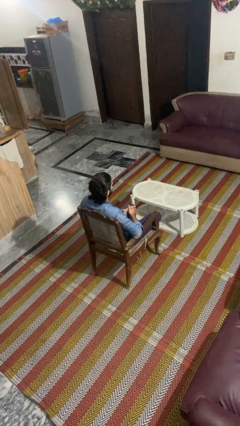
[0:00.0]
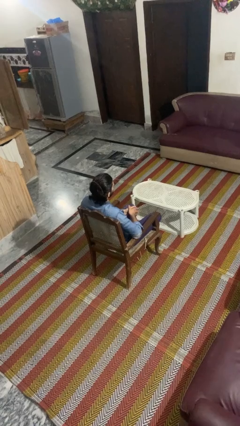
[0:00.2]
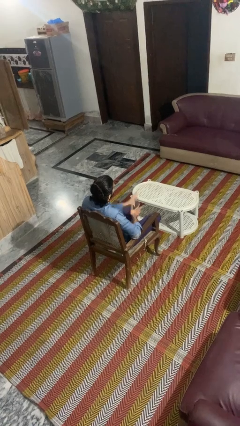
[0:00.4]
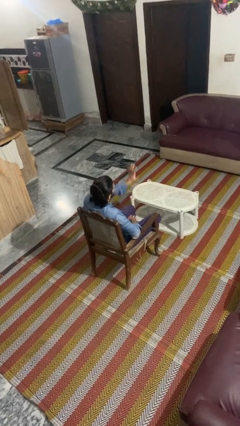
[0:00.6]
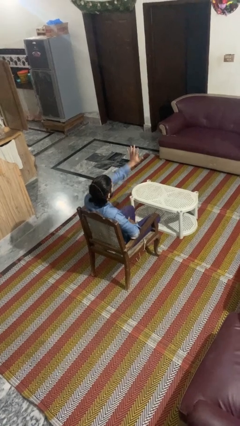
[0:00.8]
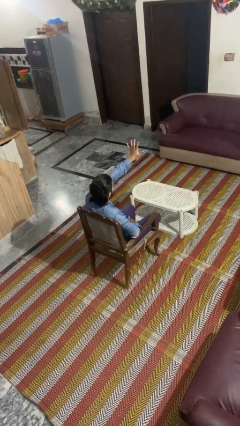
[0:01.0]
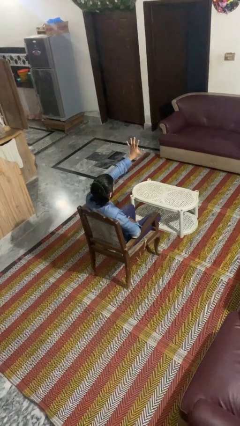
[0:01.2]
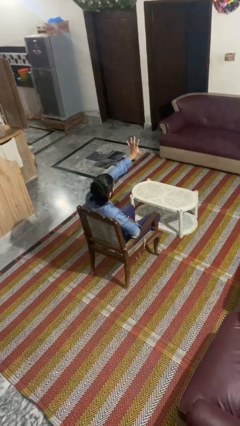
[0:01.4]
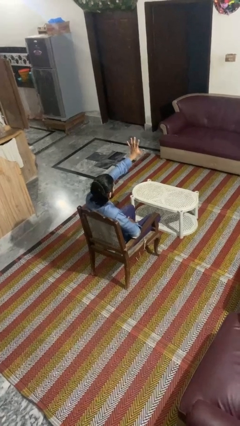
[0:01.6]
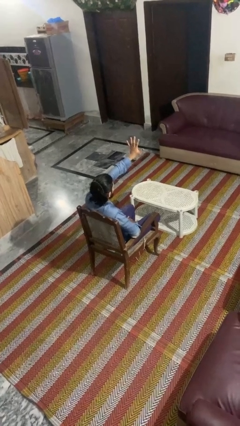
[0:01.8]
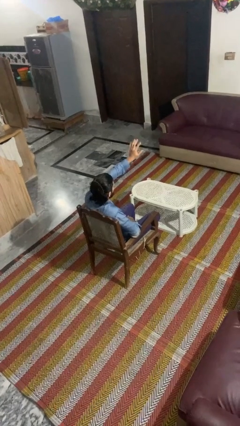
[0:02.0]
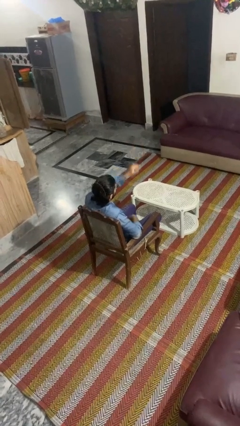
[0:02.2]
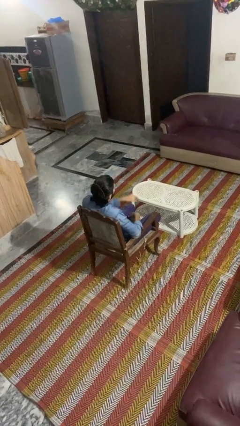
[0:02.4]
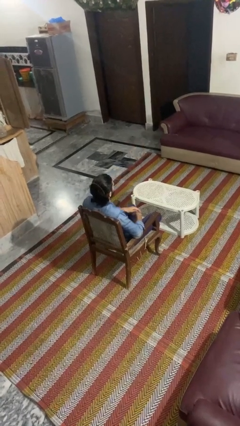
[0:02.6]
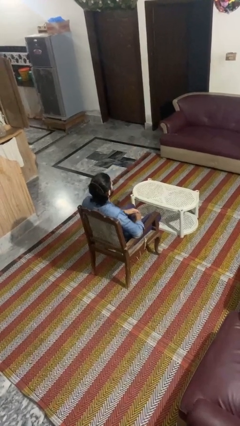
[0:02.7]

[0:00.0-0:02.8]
person gestures number five

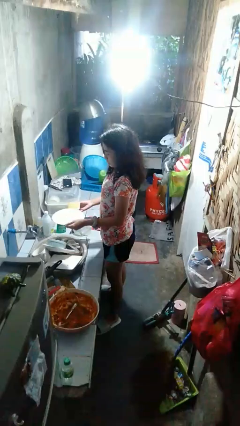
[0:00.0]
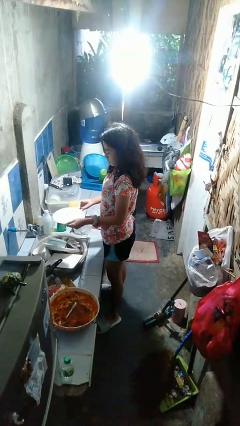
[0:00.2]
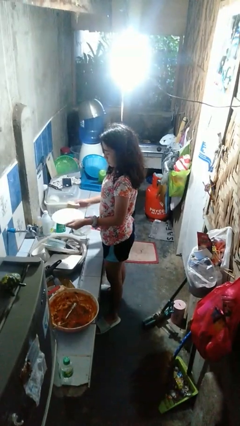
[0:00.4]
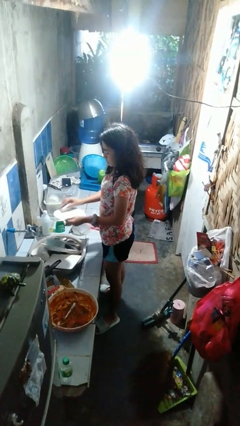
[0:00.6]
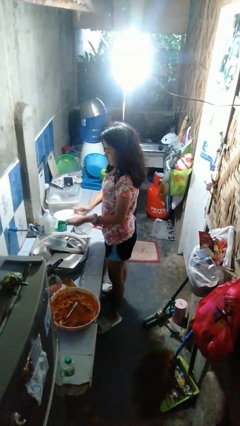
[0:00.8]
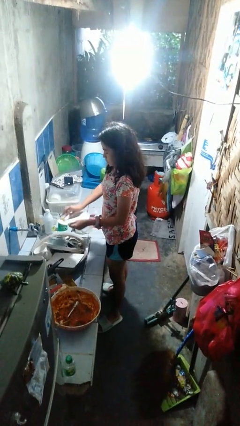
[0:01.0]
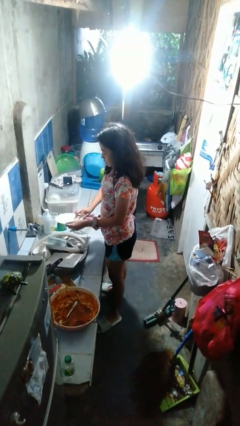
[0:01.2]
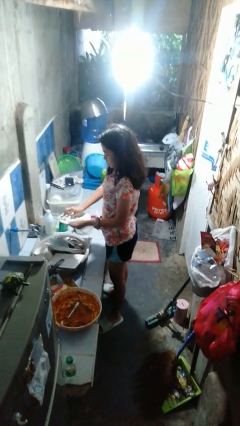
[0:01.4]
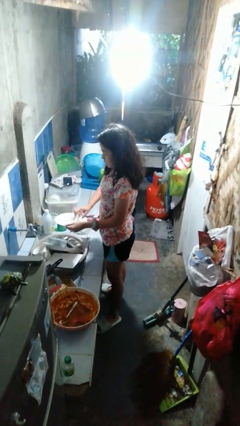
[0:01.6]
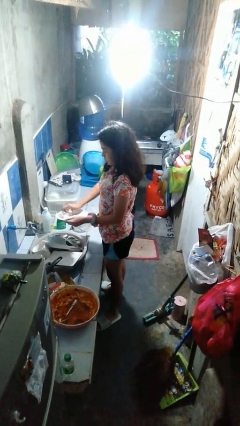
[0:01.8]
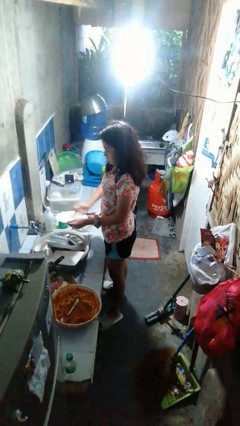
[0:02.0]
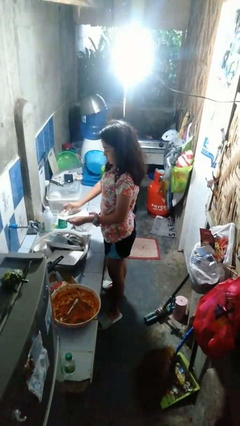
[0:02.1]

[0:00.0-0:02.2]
person washes dish

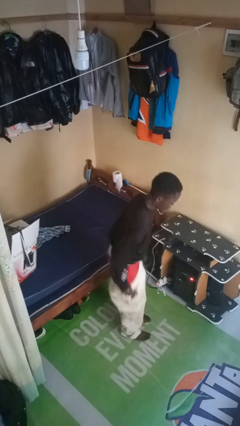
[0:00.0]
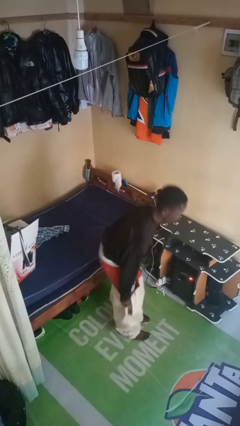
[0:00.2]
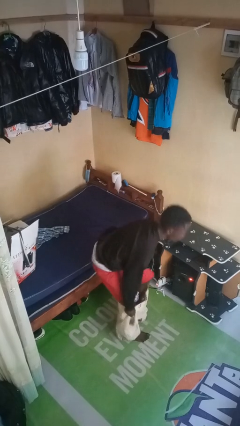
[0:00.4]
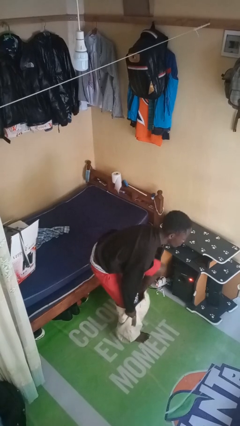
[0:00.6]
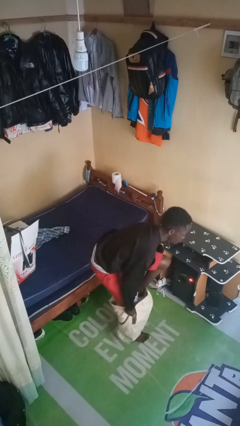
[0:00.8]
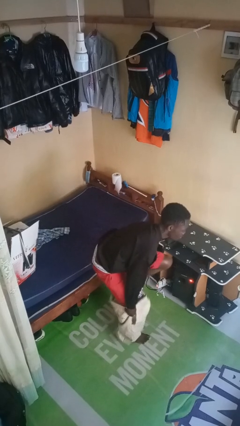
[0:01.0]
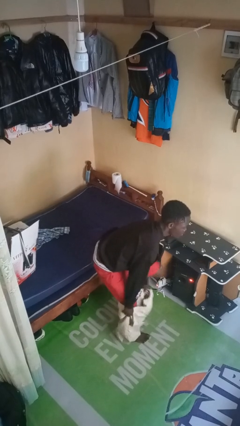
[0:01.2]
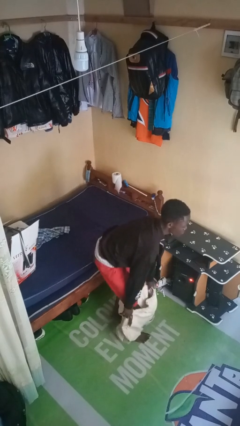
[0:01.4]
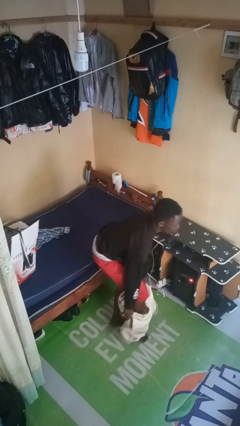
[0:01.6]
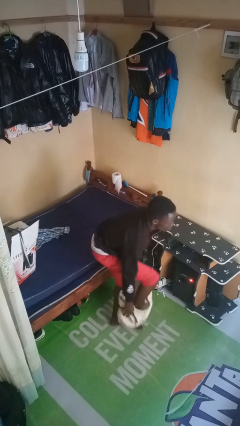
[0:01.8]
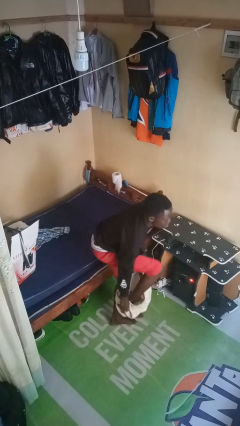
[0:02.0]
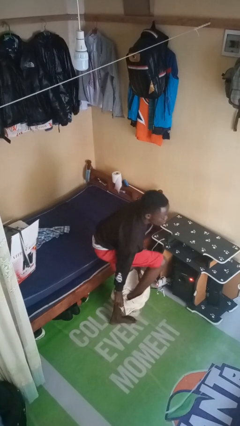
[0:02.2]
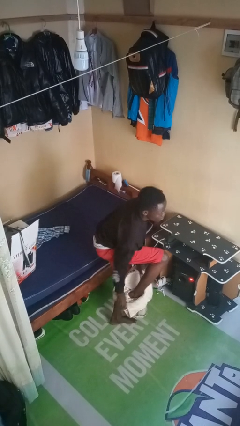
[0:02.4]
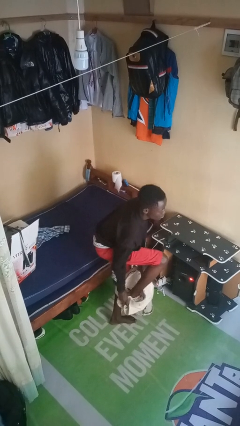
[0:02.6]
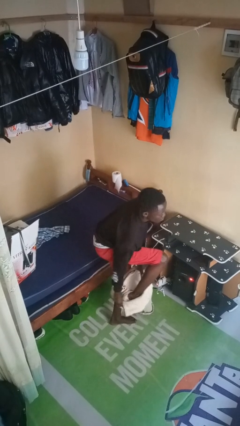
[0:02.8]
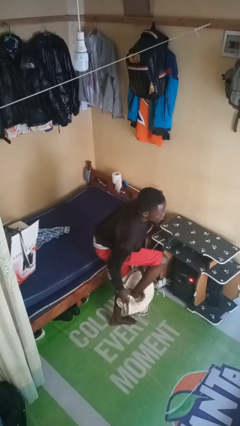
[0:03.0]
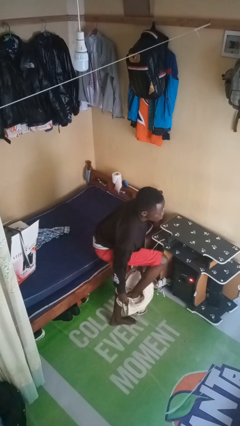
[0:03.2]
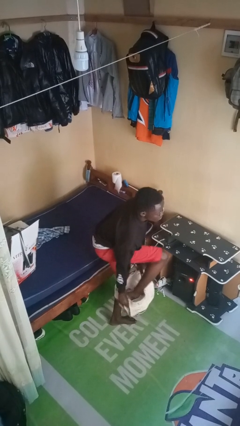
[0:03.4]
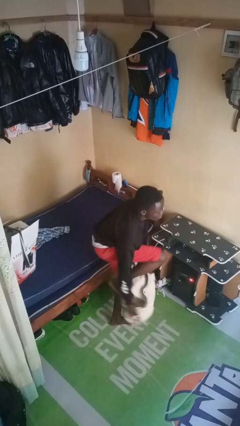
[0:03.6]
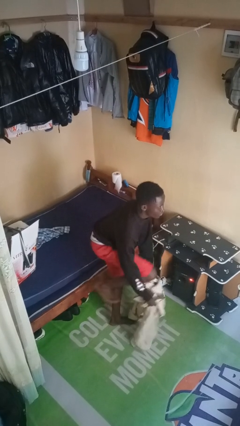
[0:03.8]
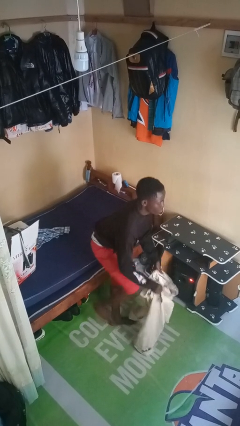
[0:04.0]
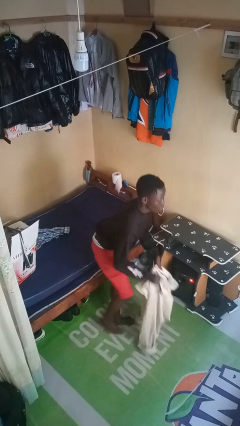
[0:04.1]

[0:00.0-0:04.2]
person takes off pants

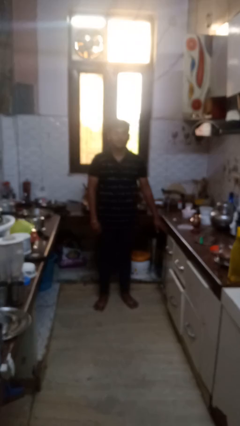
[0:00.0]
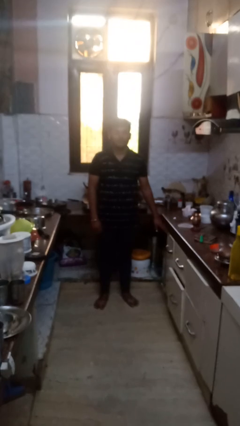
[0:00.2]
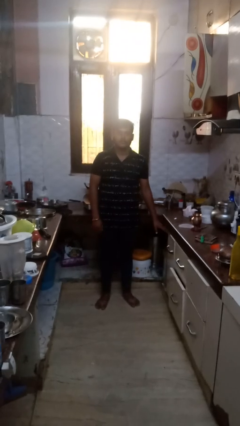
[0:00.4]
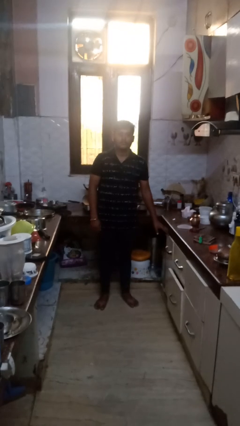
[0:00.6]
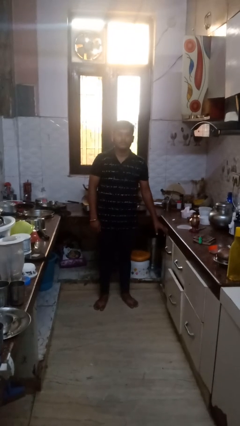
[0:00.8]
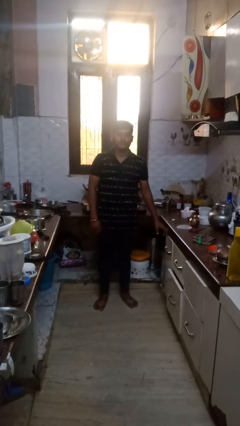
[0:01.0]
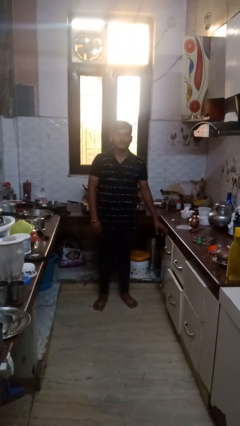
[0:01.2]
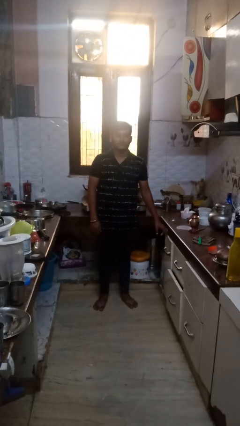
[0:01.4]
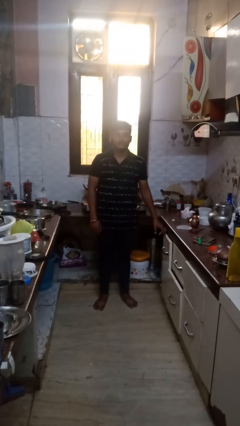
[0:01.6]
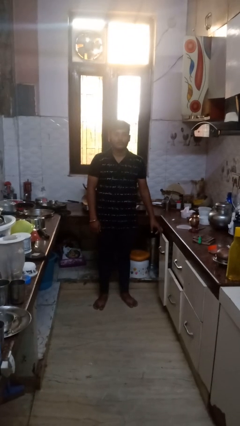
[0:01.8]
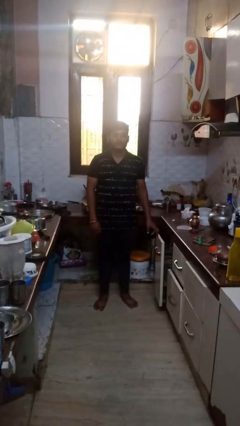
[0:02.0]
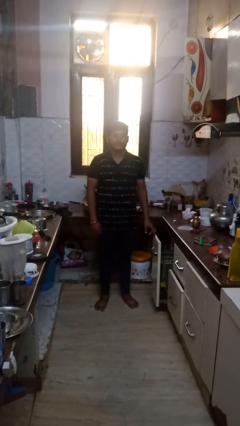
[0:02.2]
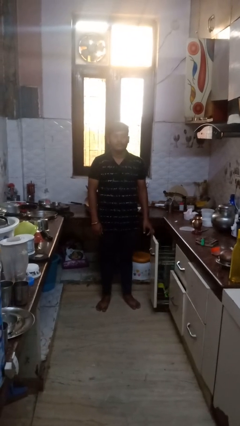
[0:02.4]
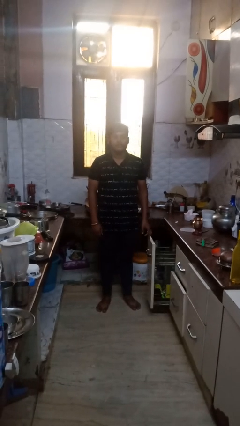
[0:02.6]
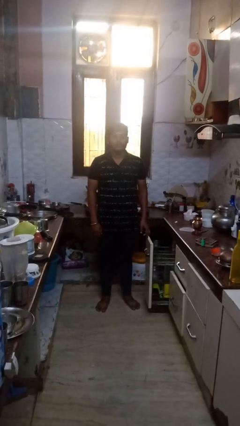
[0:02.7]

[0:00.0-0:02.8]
person opens dishwasher

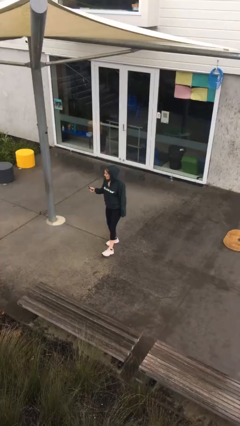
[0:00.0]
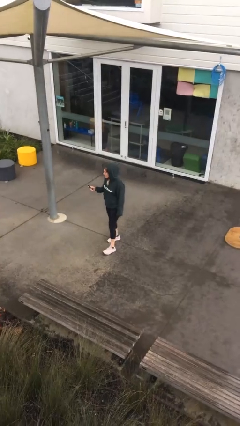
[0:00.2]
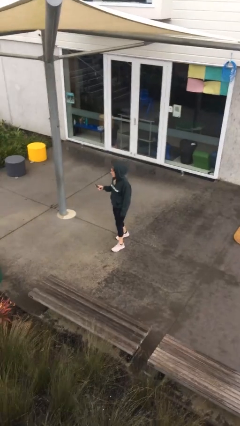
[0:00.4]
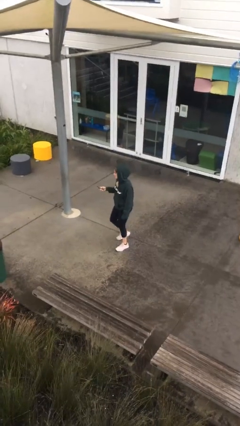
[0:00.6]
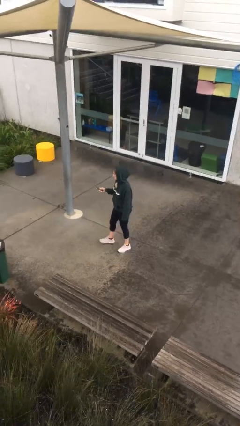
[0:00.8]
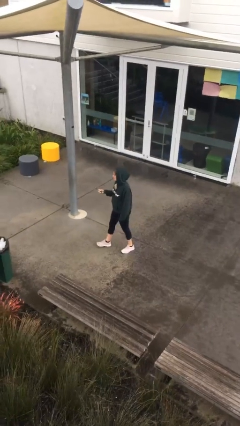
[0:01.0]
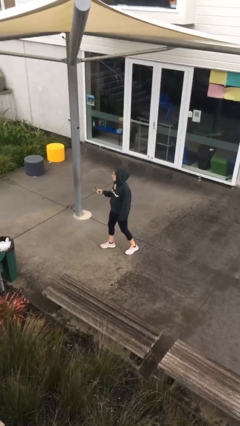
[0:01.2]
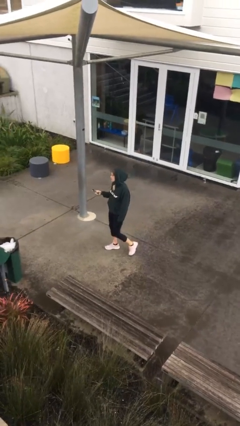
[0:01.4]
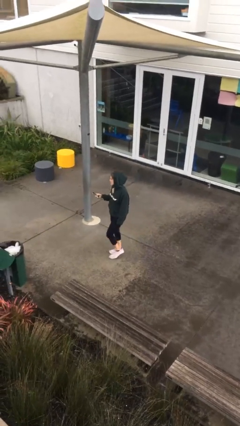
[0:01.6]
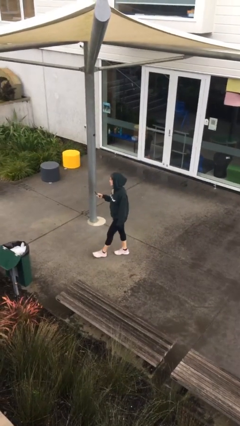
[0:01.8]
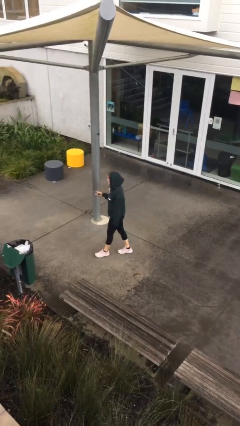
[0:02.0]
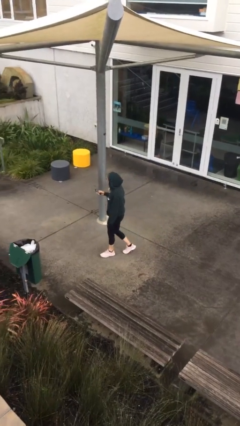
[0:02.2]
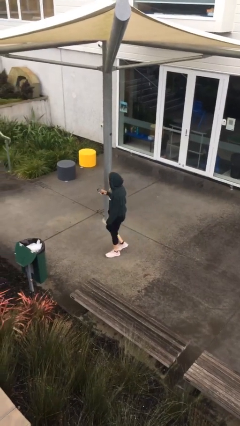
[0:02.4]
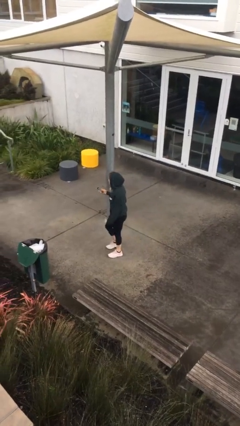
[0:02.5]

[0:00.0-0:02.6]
person texts on phone

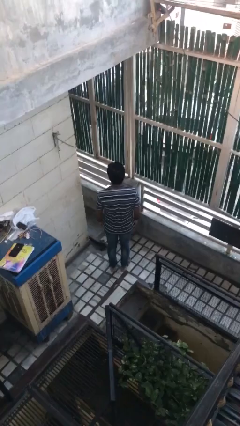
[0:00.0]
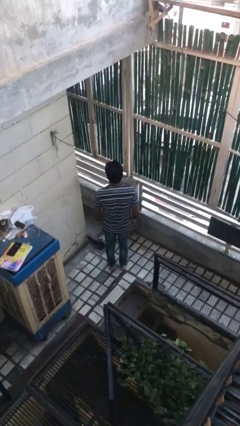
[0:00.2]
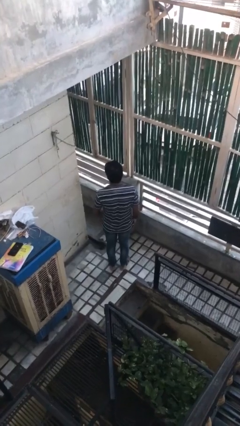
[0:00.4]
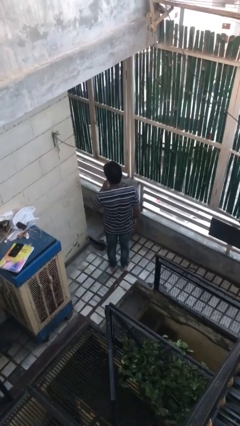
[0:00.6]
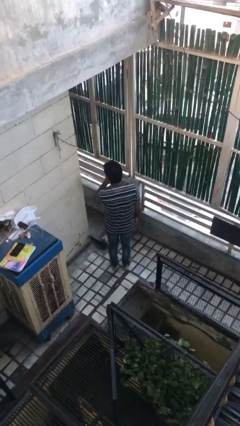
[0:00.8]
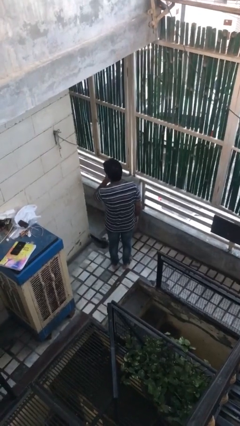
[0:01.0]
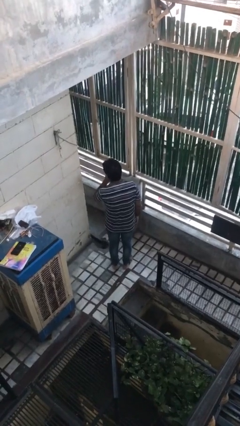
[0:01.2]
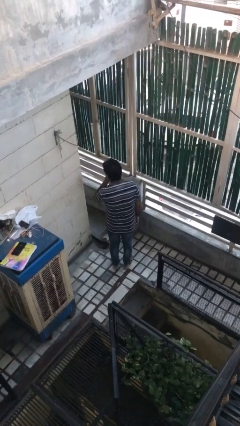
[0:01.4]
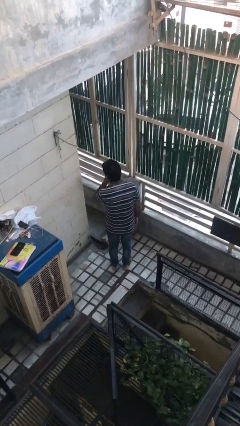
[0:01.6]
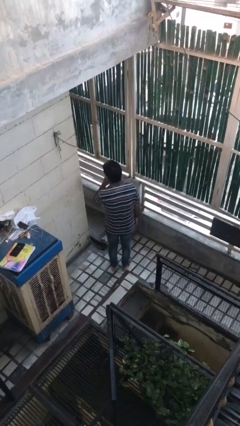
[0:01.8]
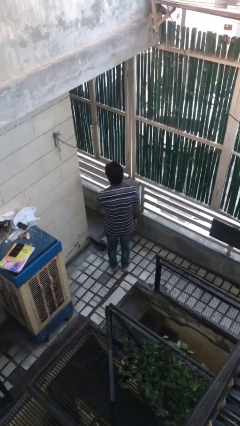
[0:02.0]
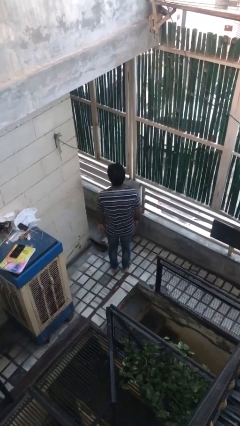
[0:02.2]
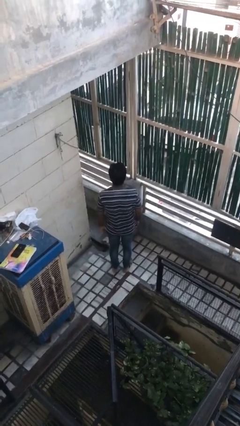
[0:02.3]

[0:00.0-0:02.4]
person gestures be quiet
